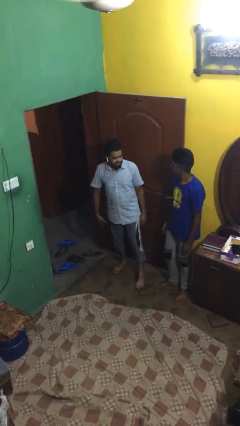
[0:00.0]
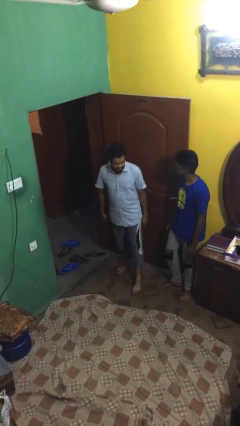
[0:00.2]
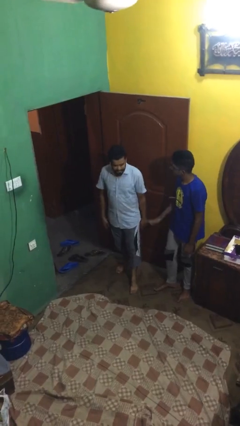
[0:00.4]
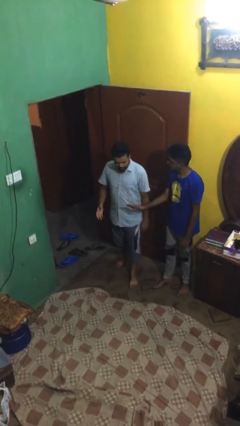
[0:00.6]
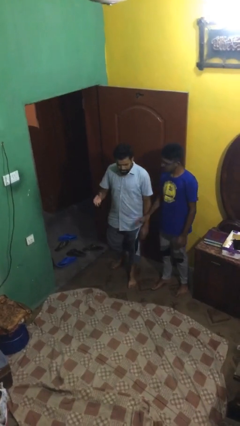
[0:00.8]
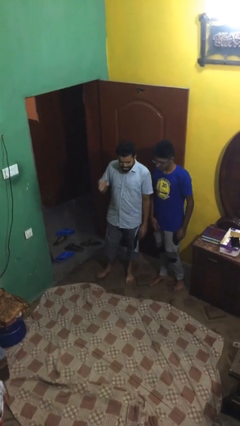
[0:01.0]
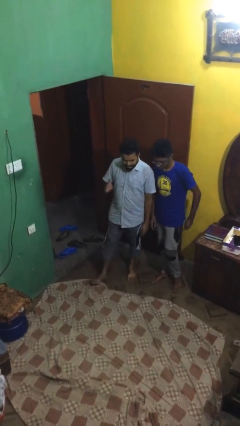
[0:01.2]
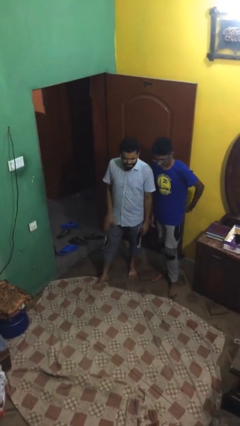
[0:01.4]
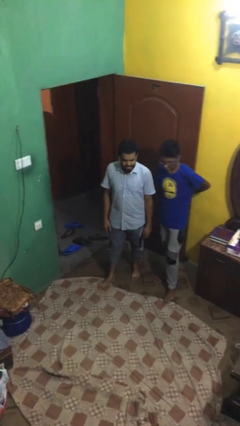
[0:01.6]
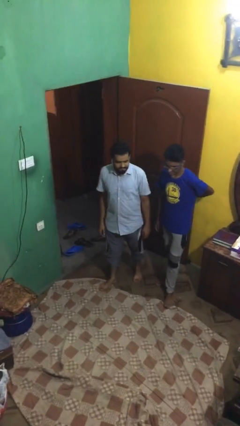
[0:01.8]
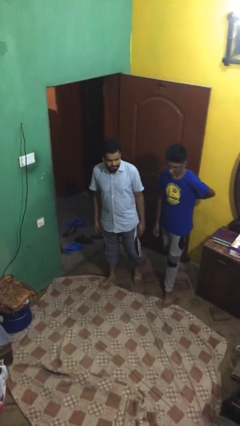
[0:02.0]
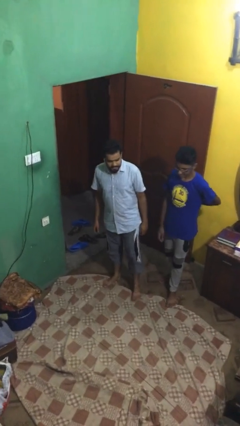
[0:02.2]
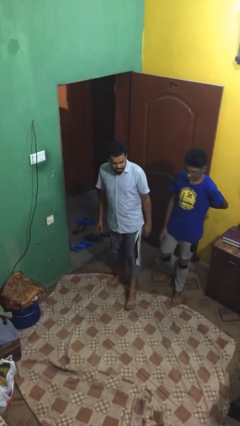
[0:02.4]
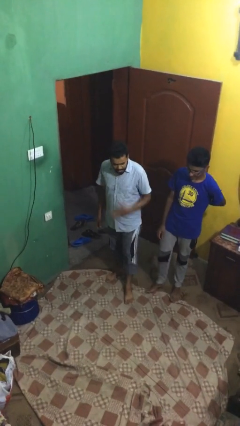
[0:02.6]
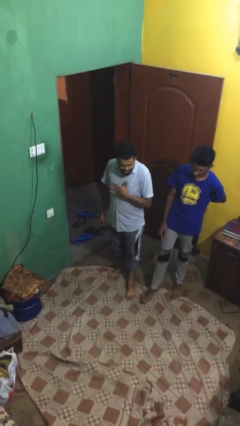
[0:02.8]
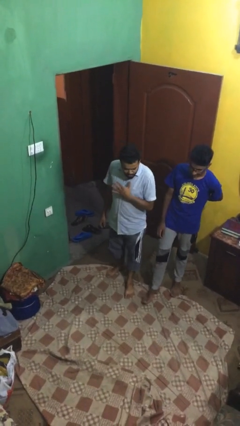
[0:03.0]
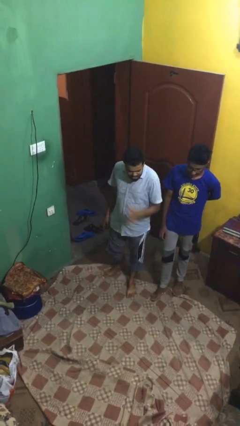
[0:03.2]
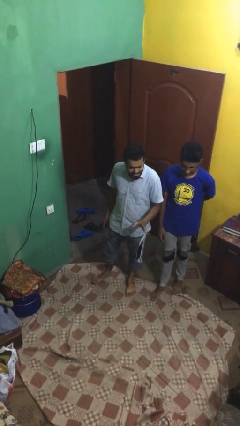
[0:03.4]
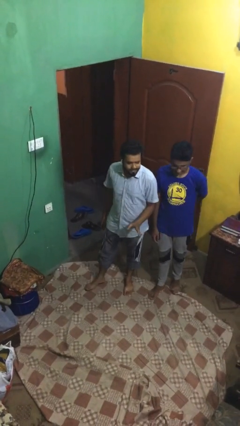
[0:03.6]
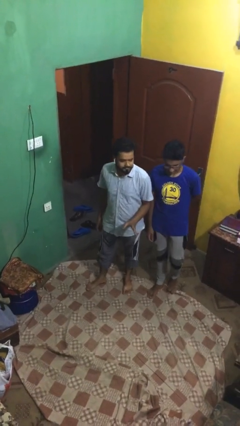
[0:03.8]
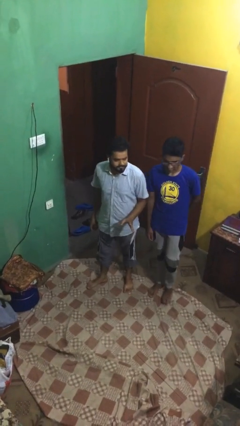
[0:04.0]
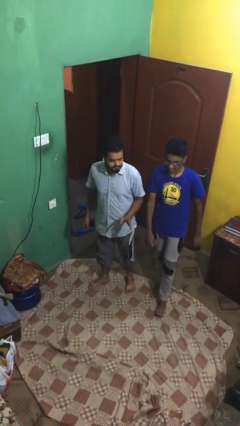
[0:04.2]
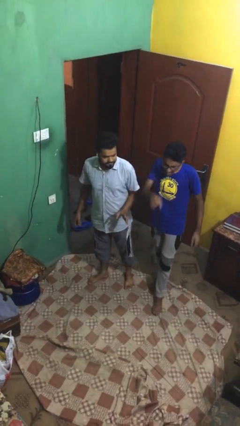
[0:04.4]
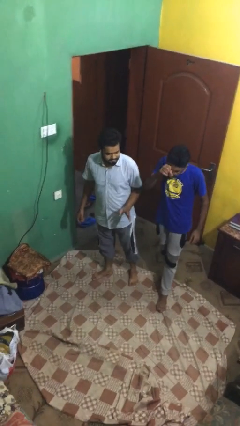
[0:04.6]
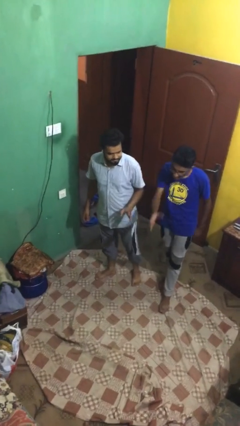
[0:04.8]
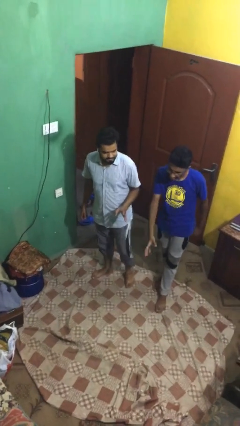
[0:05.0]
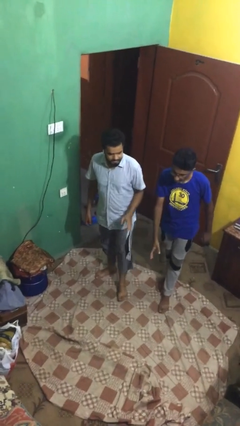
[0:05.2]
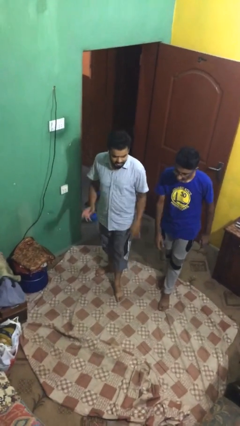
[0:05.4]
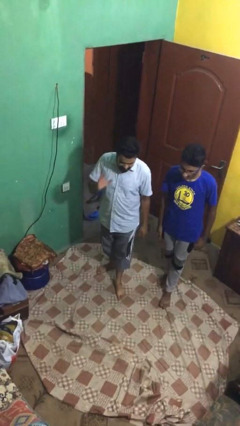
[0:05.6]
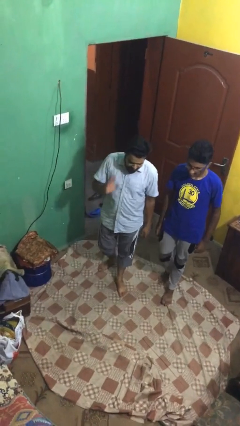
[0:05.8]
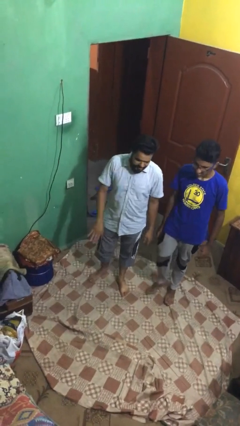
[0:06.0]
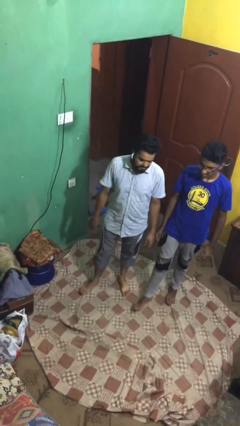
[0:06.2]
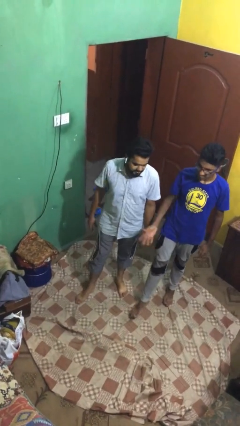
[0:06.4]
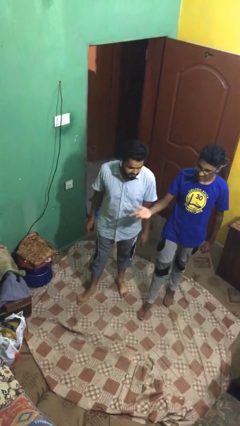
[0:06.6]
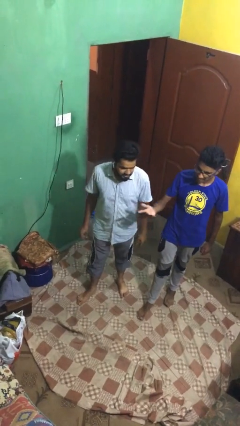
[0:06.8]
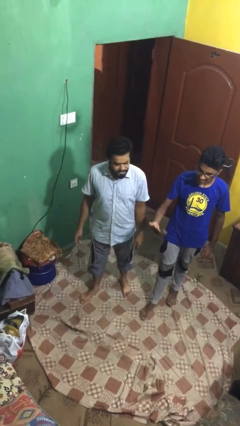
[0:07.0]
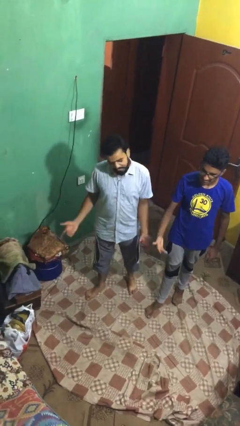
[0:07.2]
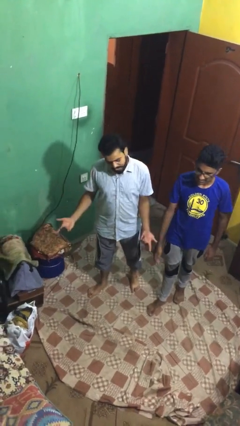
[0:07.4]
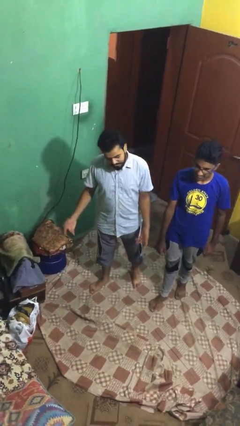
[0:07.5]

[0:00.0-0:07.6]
person talks to person

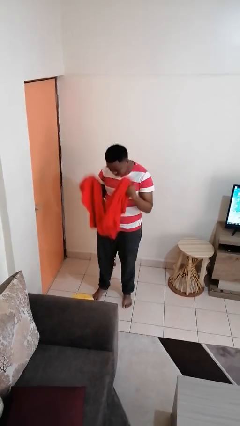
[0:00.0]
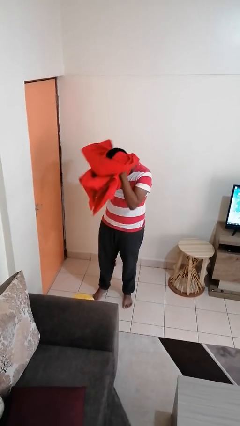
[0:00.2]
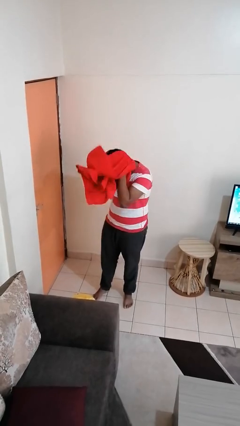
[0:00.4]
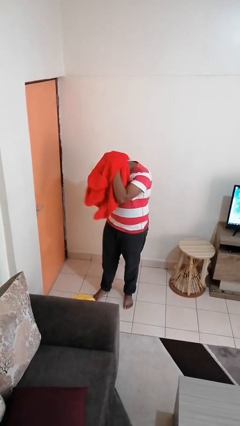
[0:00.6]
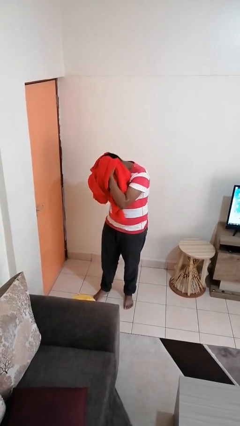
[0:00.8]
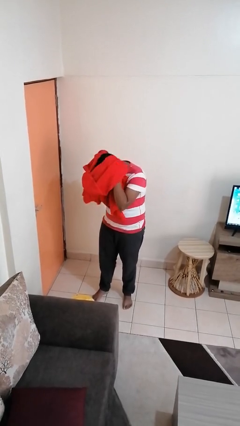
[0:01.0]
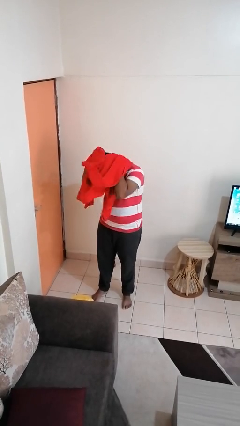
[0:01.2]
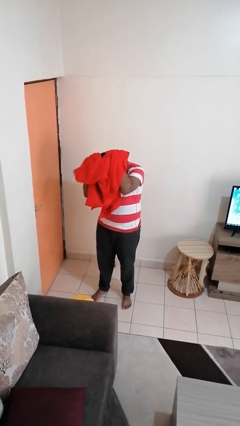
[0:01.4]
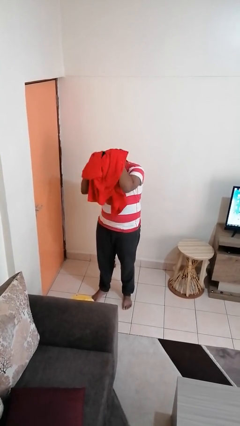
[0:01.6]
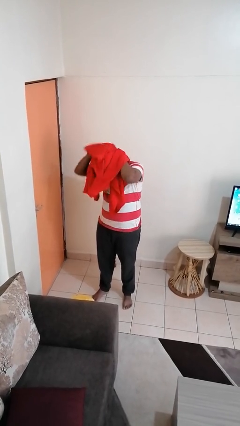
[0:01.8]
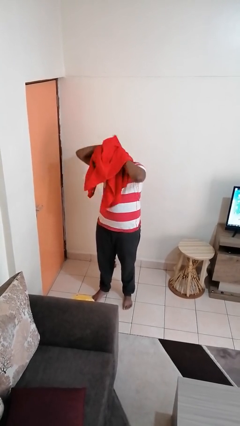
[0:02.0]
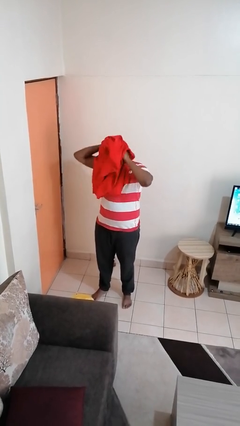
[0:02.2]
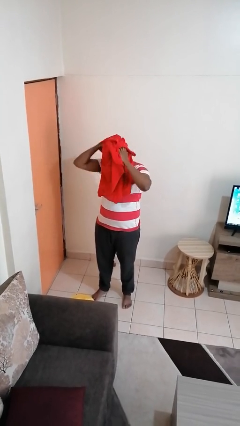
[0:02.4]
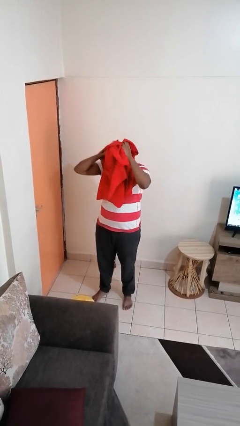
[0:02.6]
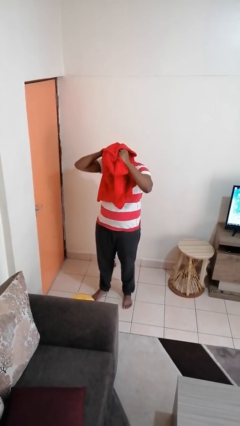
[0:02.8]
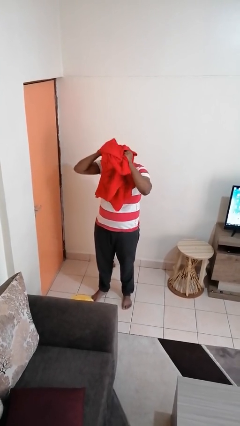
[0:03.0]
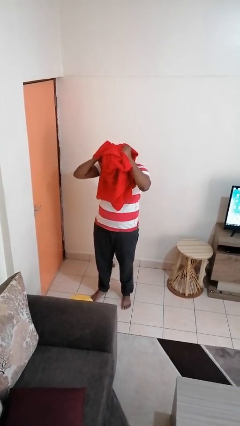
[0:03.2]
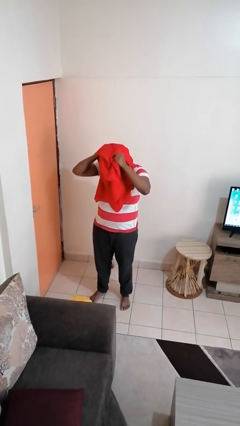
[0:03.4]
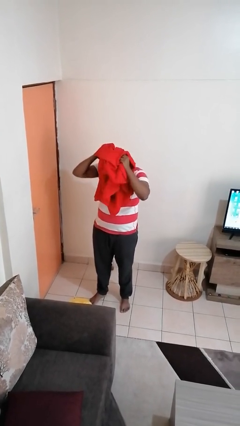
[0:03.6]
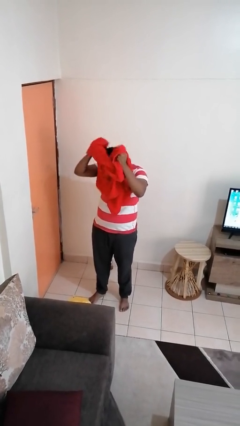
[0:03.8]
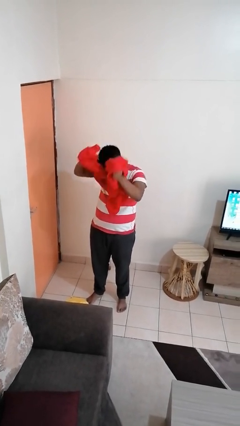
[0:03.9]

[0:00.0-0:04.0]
person dries hair with towel

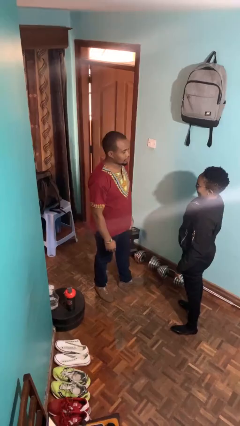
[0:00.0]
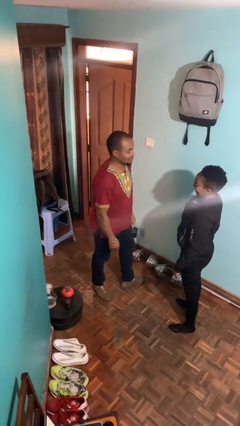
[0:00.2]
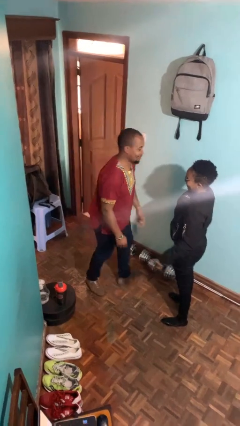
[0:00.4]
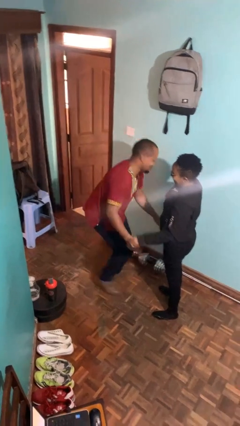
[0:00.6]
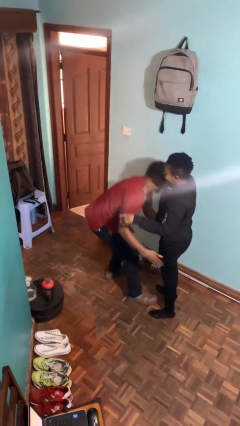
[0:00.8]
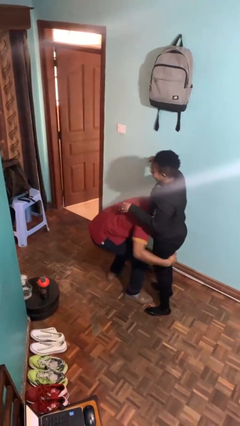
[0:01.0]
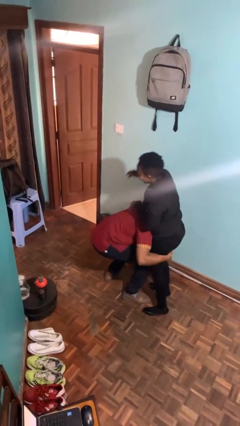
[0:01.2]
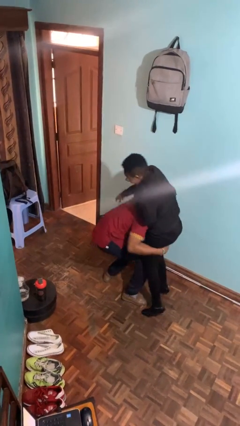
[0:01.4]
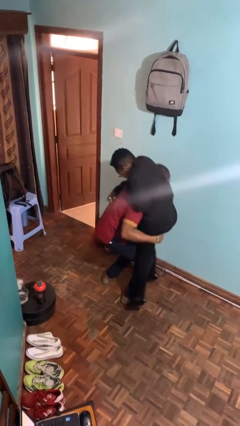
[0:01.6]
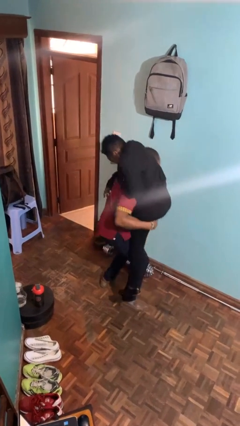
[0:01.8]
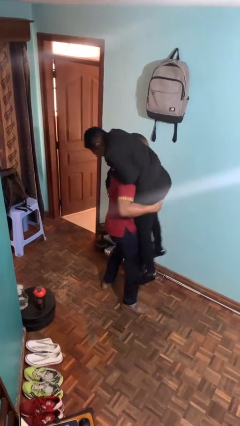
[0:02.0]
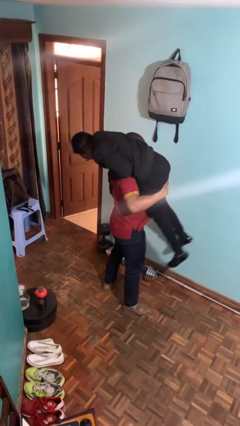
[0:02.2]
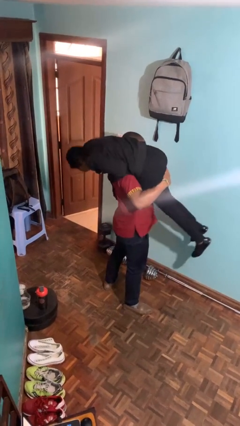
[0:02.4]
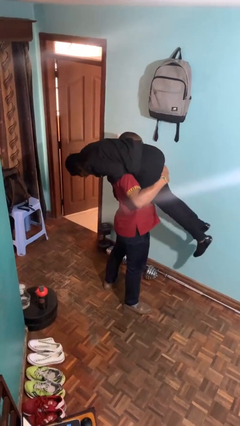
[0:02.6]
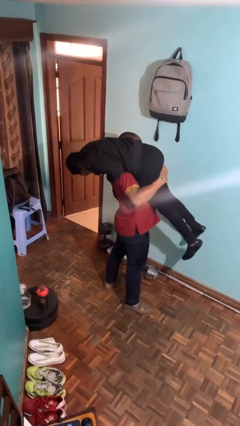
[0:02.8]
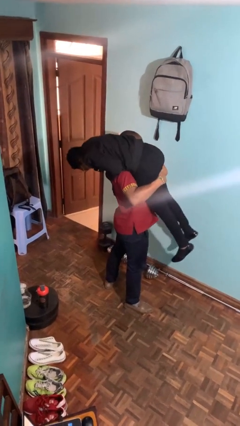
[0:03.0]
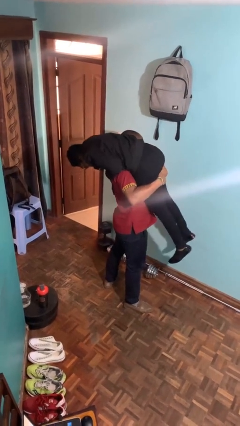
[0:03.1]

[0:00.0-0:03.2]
person carries person over shoulder

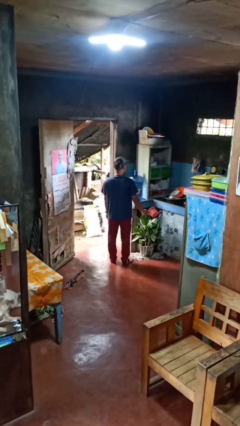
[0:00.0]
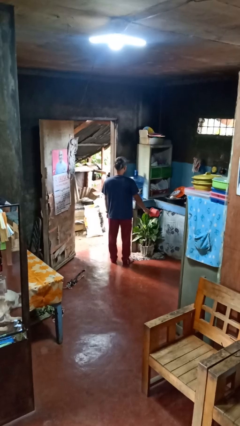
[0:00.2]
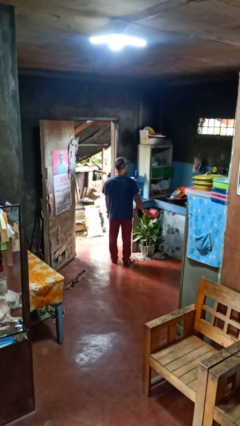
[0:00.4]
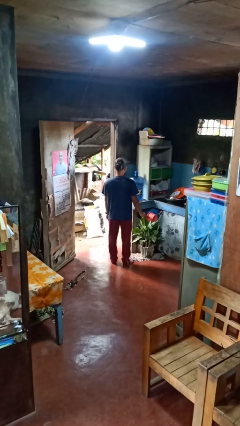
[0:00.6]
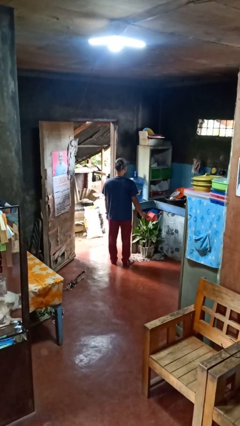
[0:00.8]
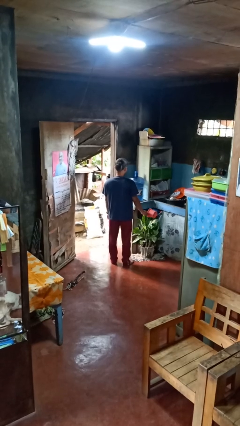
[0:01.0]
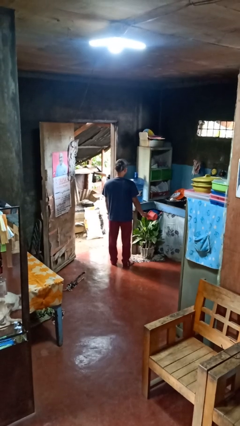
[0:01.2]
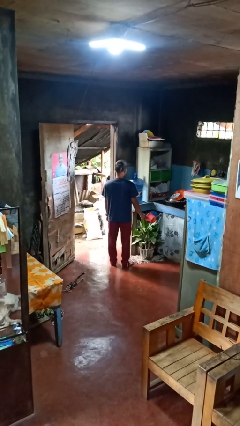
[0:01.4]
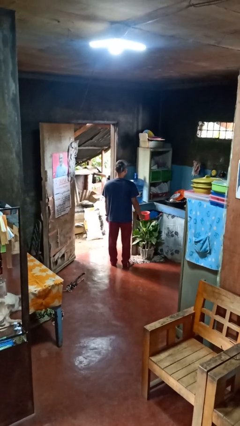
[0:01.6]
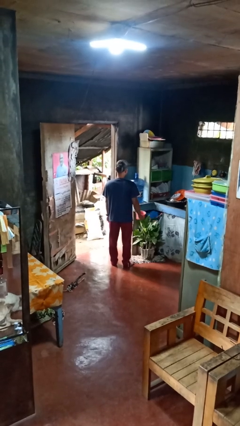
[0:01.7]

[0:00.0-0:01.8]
person waters houseplant

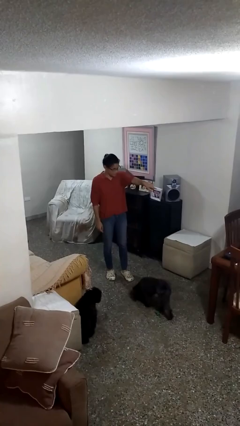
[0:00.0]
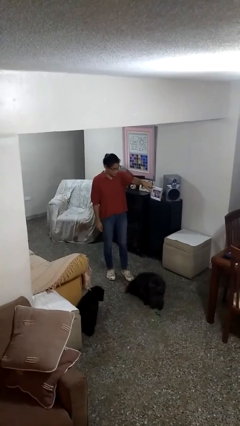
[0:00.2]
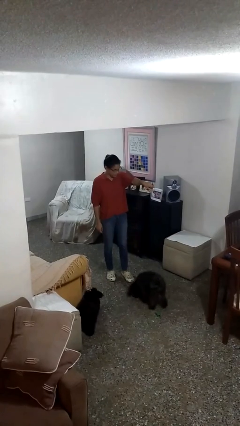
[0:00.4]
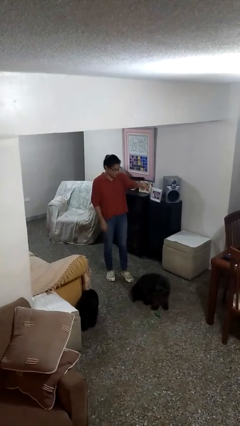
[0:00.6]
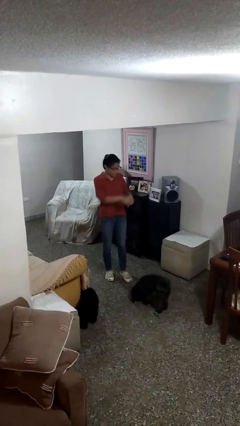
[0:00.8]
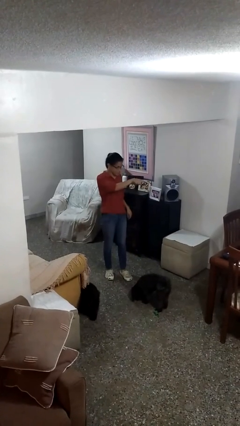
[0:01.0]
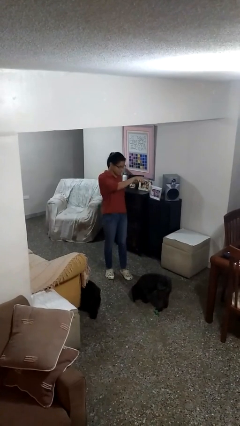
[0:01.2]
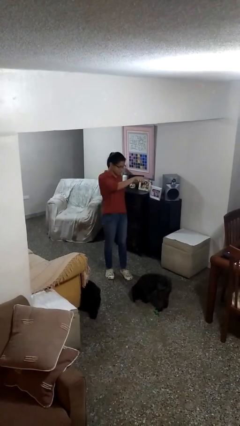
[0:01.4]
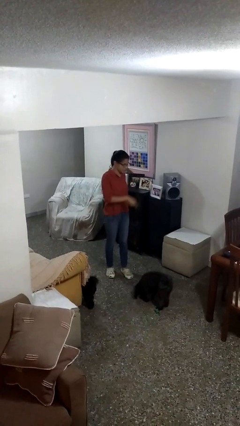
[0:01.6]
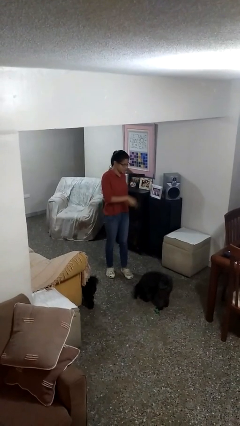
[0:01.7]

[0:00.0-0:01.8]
person points at person
